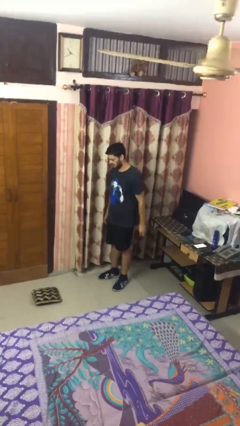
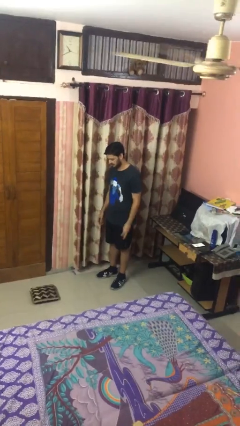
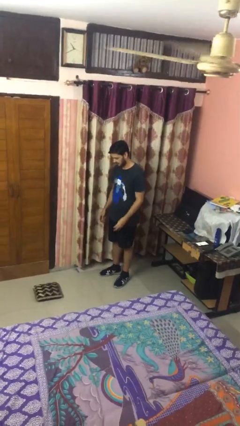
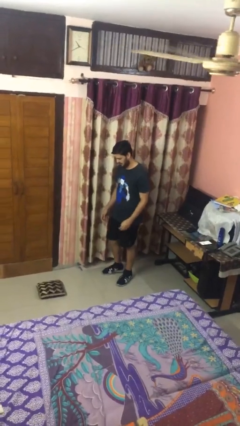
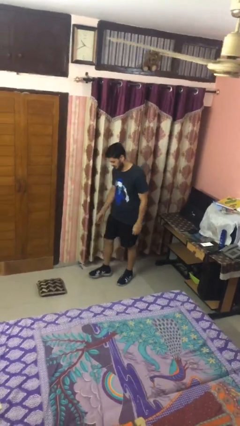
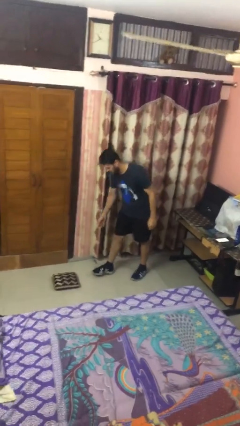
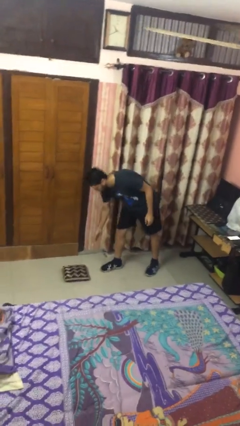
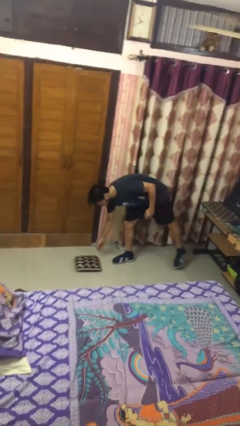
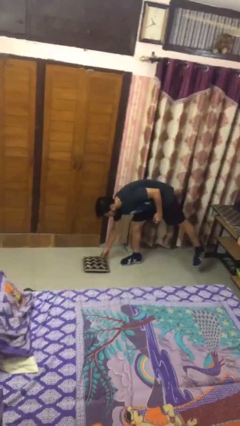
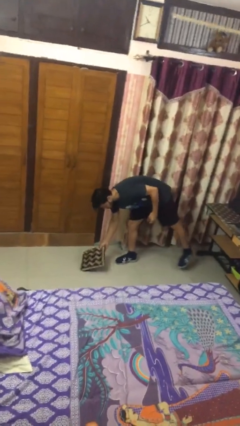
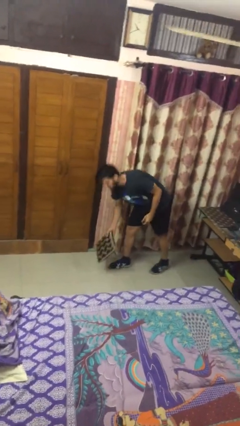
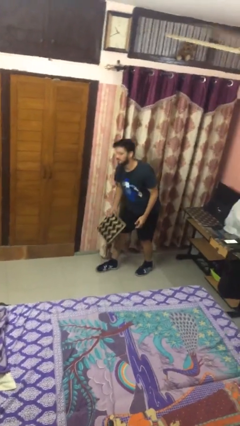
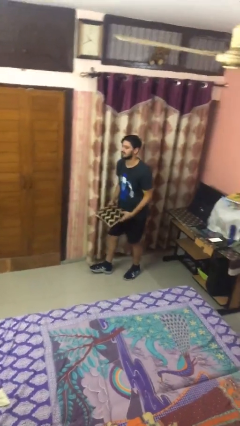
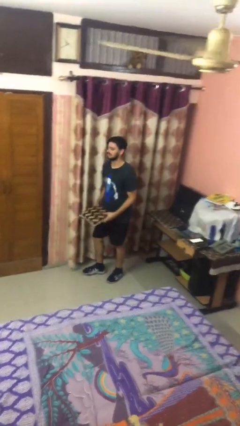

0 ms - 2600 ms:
person picks up object from floor

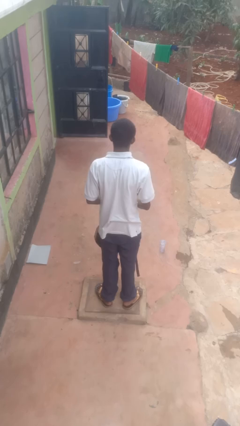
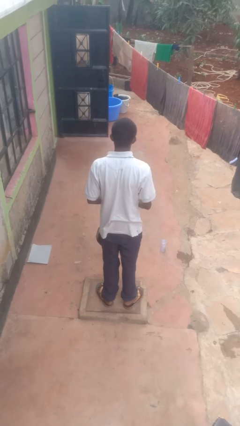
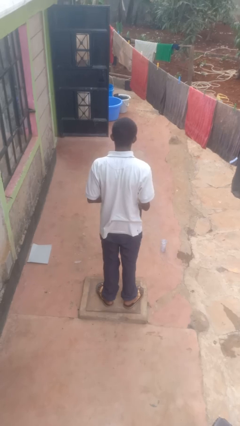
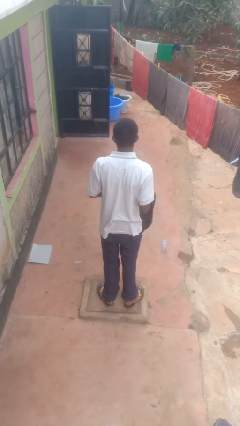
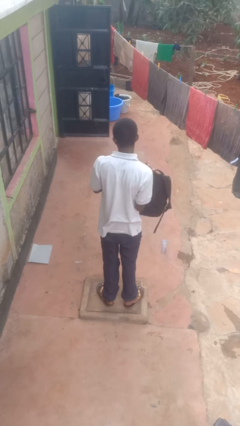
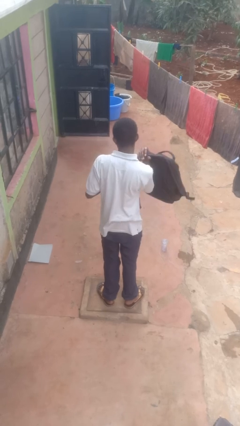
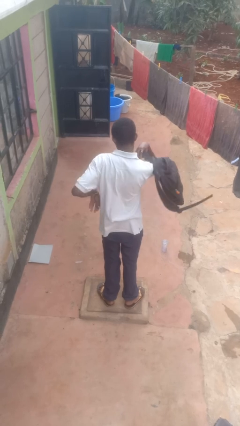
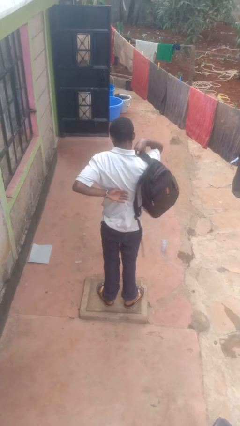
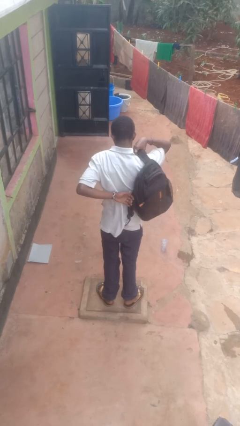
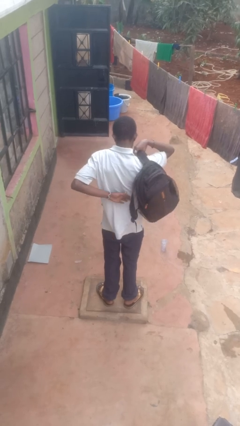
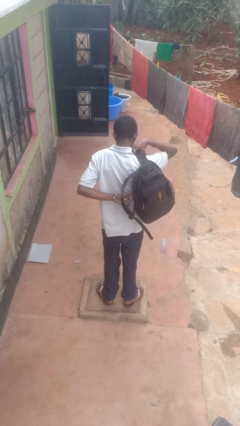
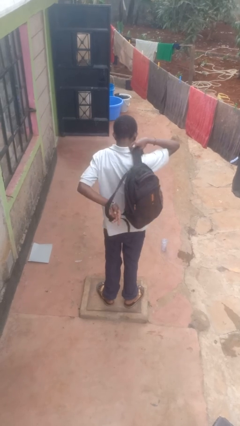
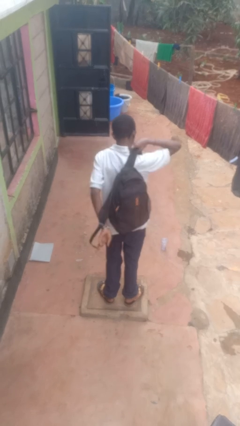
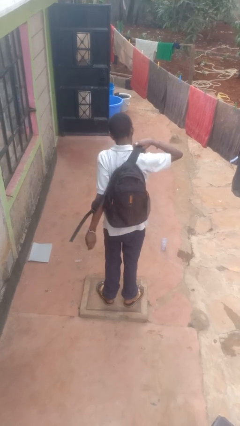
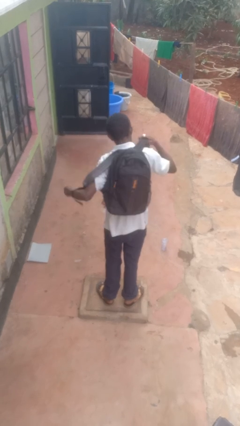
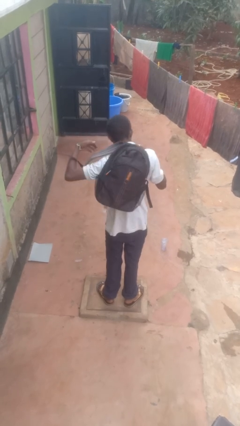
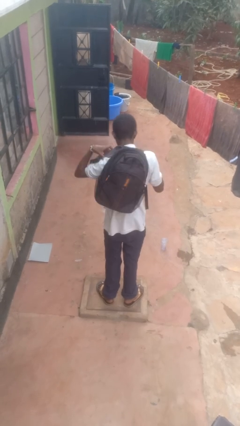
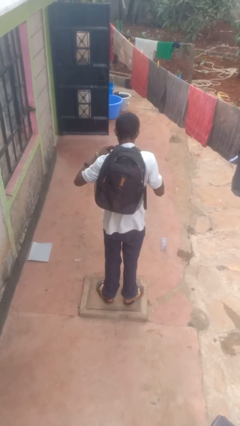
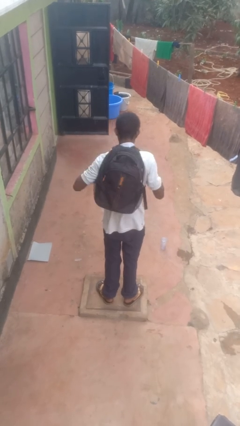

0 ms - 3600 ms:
person puts on backpack

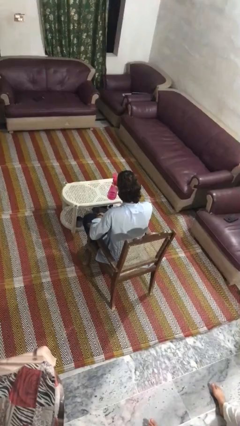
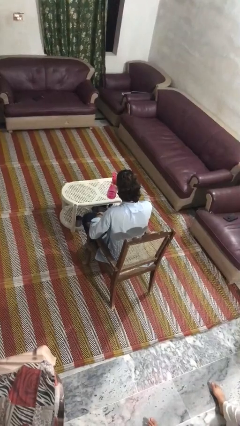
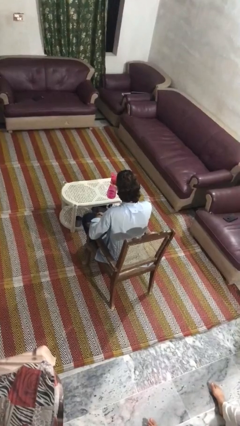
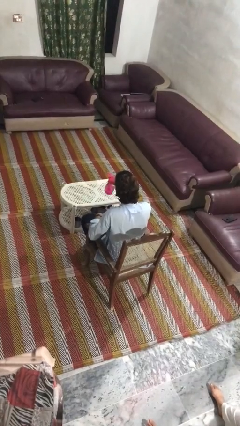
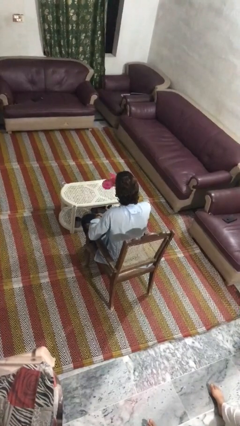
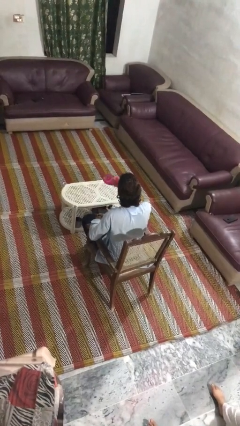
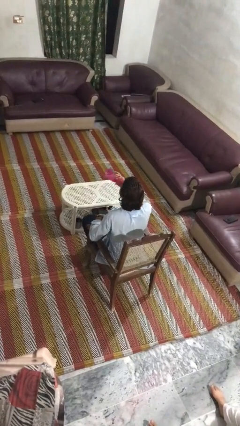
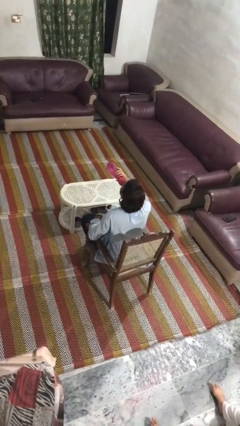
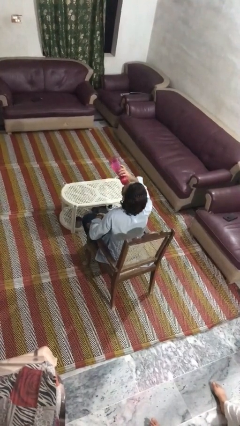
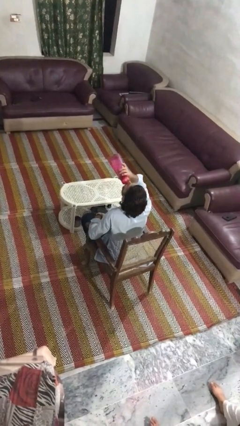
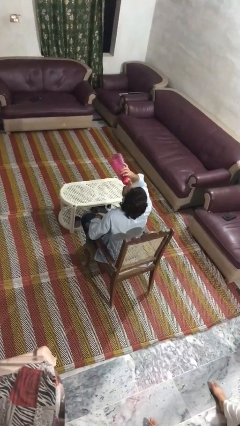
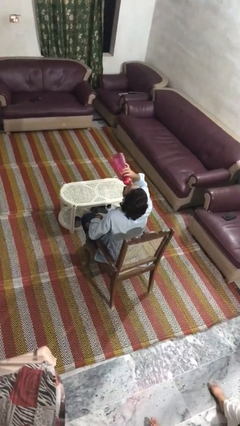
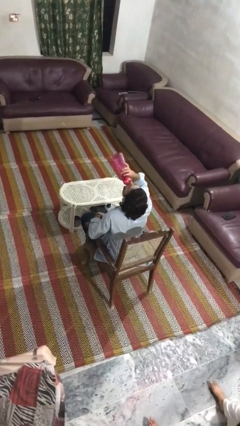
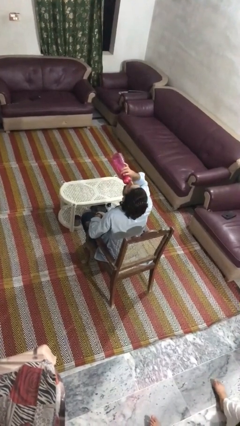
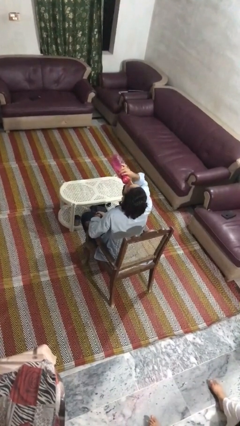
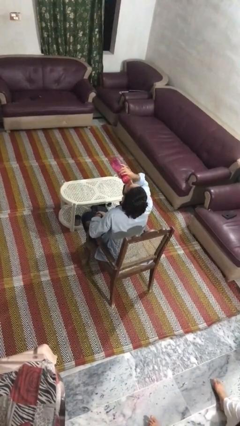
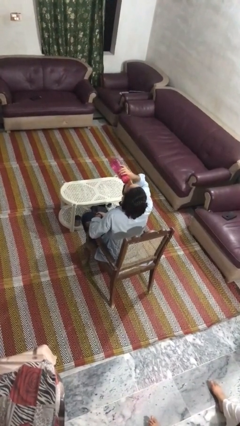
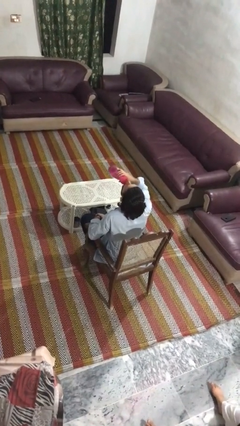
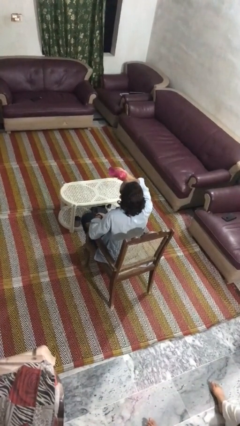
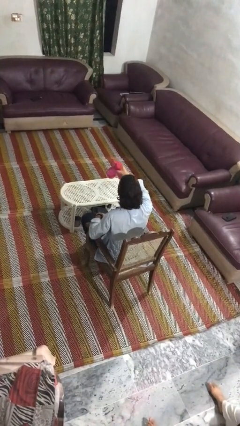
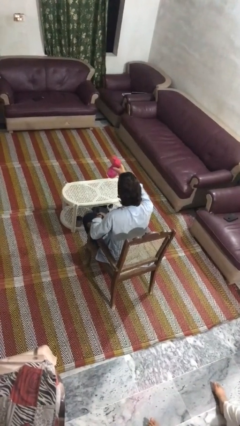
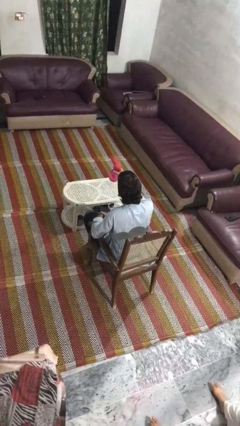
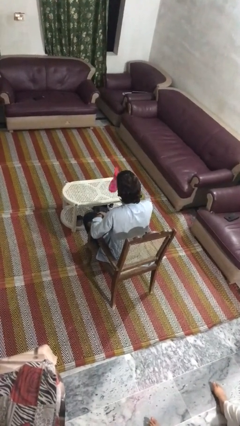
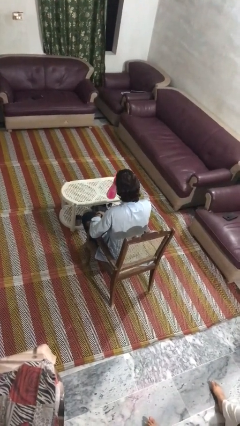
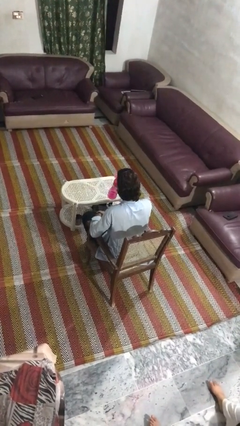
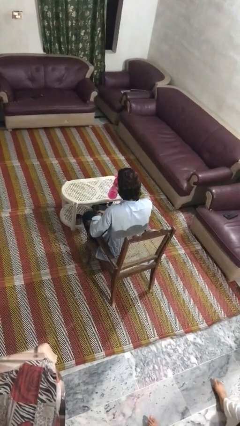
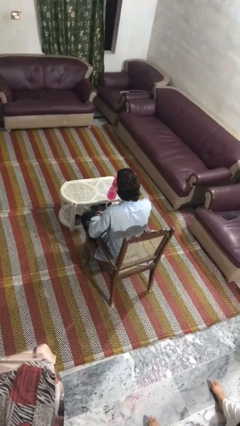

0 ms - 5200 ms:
person drinks from bottle

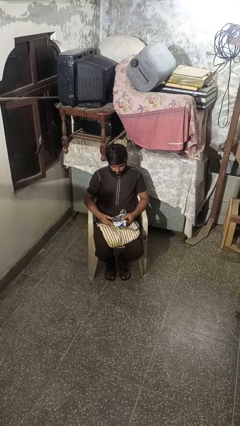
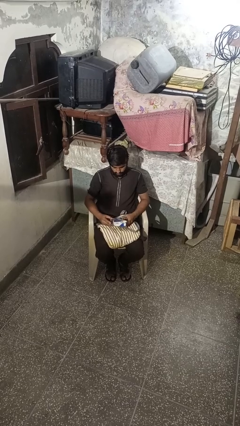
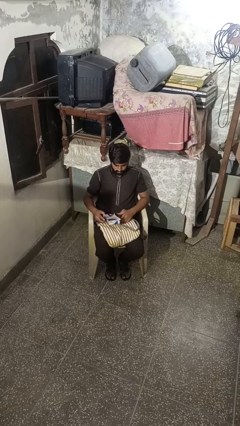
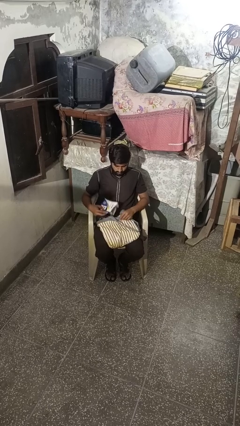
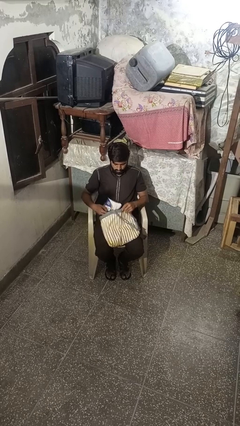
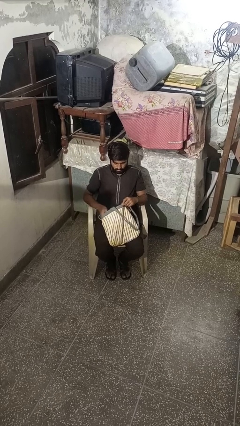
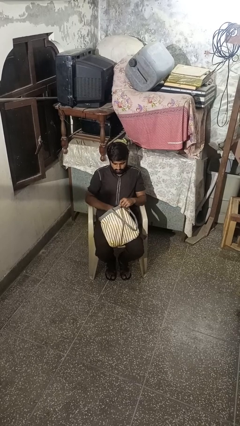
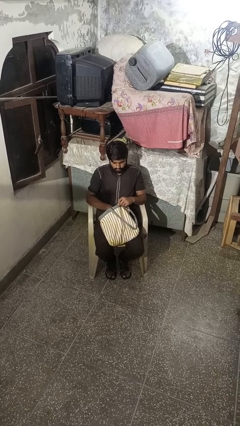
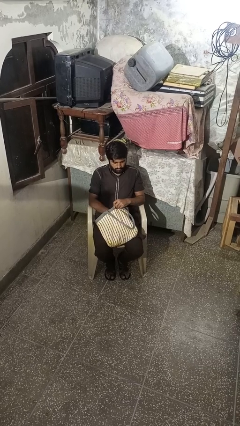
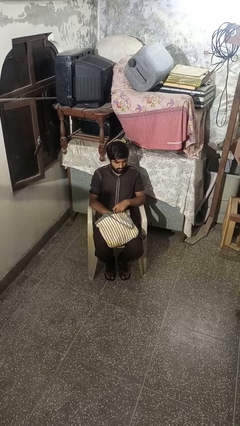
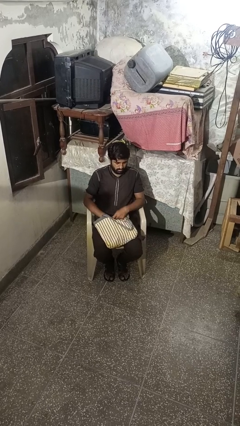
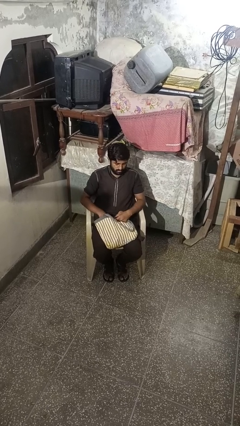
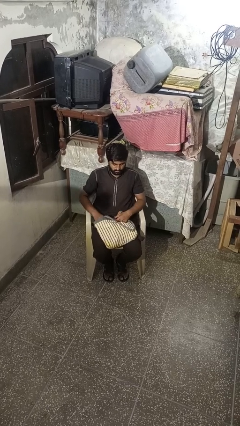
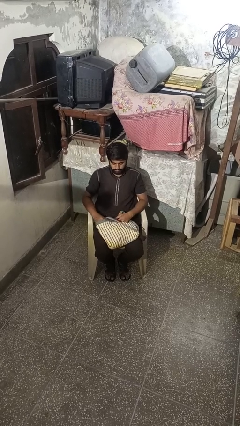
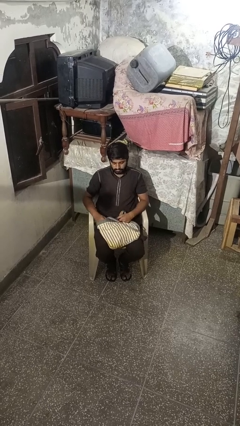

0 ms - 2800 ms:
person puts object into backpack

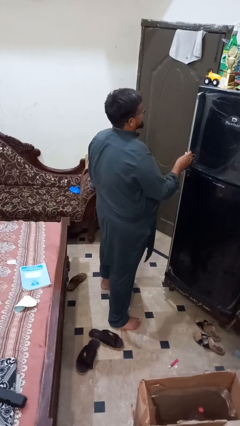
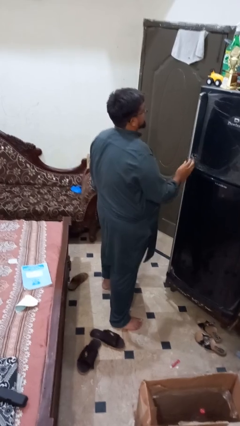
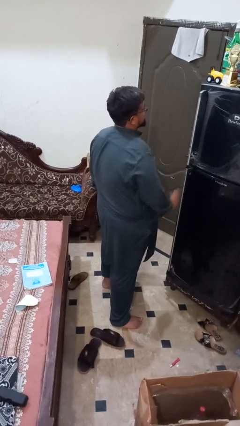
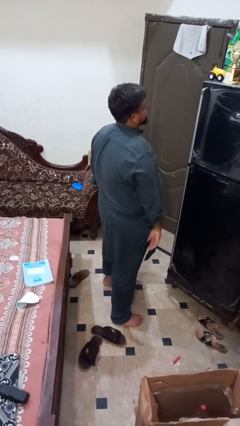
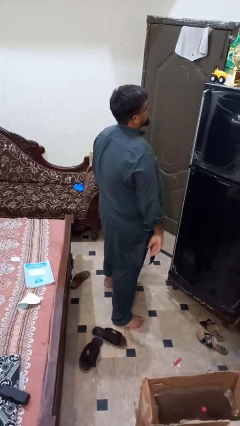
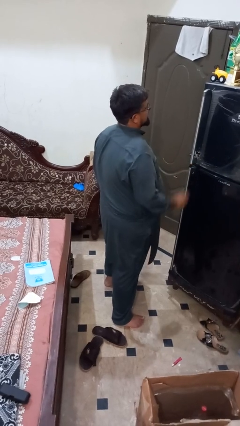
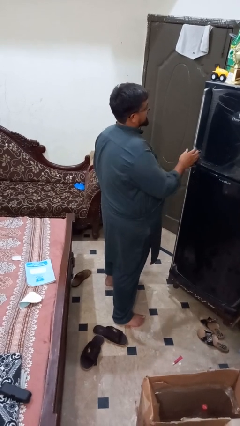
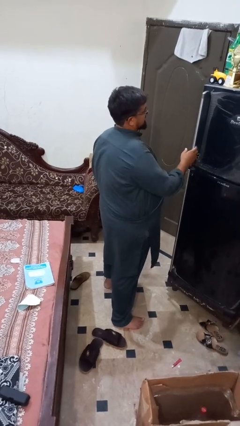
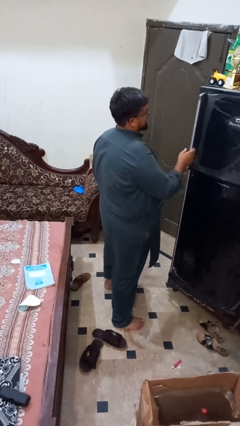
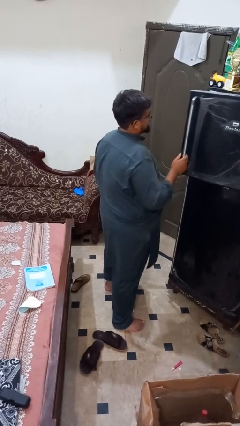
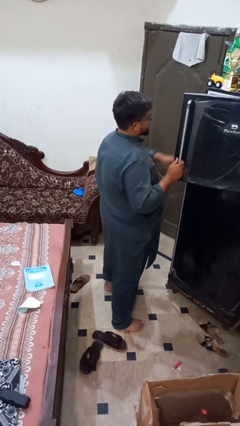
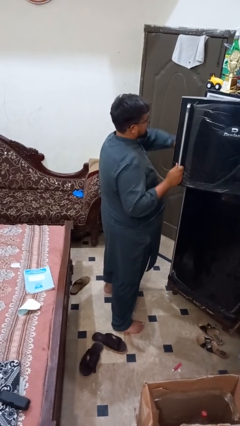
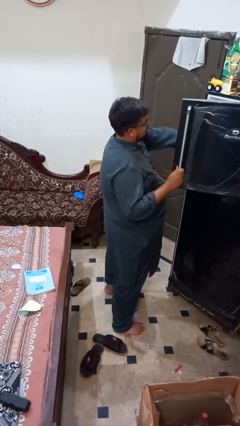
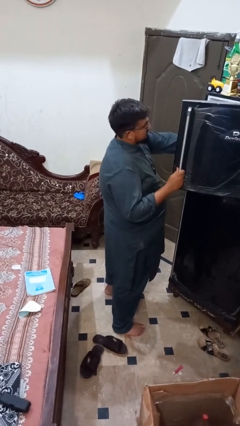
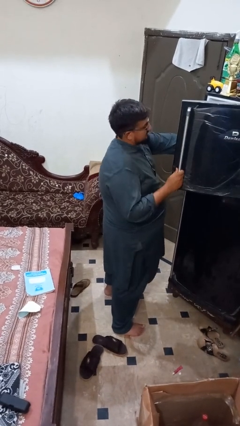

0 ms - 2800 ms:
person takes object from refrigerator

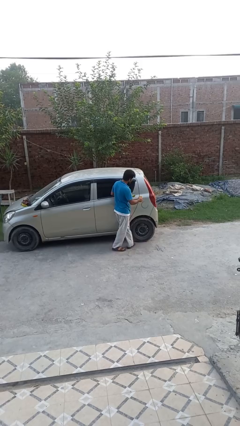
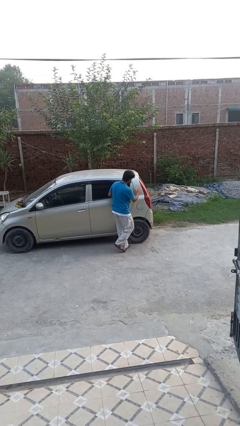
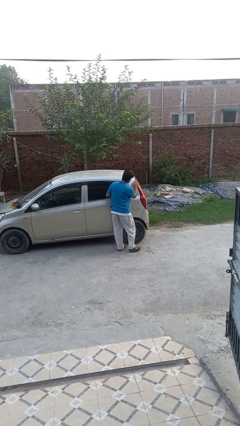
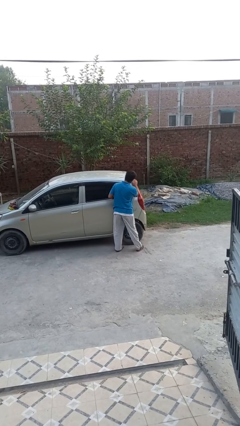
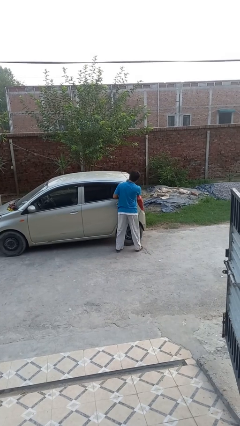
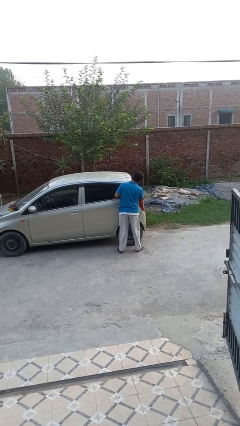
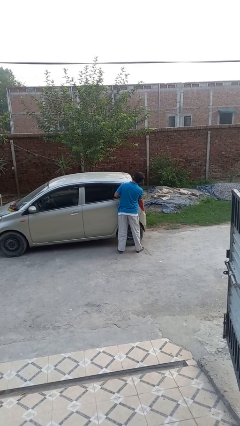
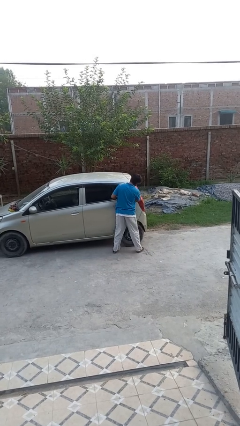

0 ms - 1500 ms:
person polishes car with rag
